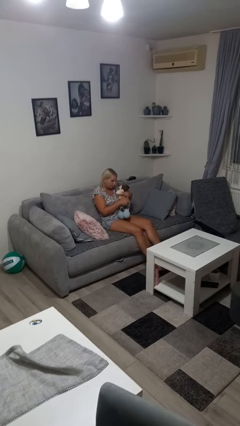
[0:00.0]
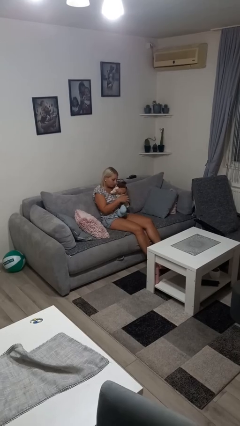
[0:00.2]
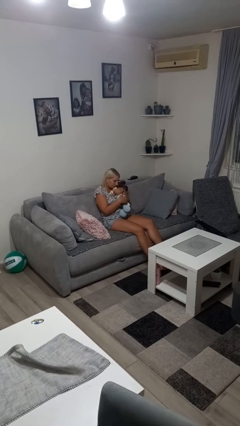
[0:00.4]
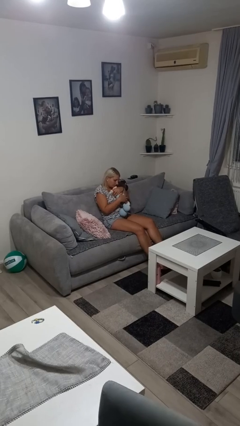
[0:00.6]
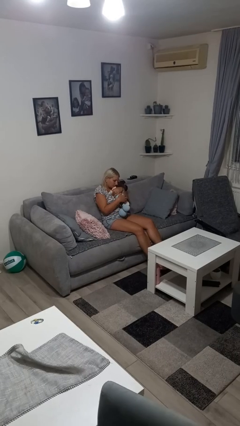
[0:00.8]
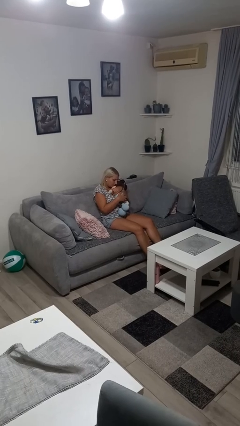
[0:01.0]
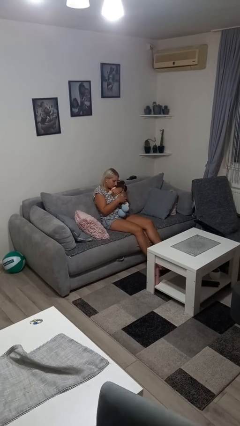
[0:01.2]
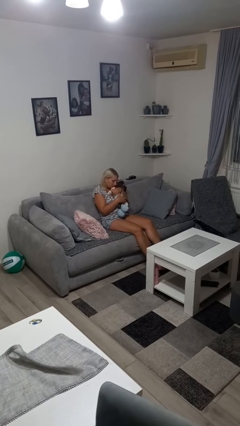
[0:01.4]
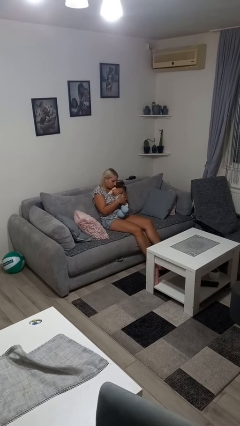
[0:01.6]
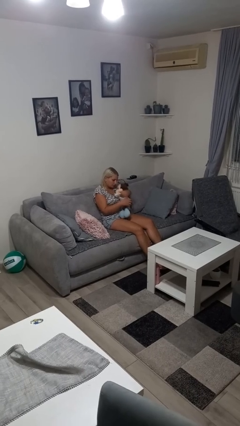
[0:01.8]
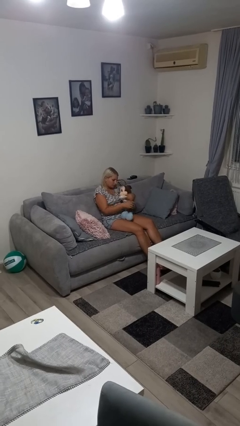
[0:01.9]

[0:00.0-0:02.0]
person hugs stuffed animal

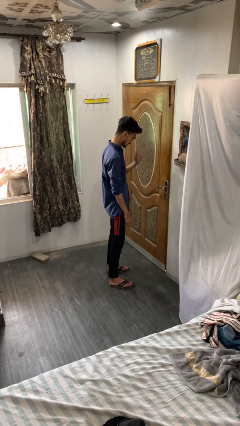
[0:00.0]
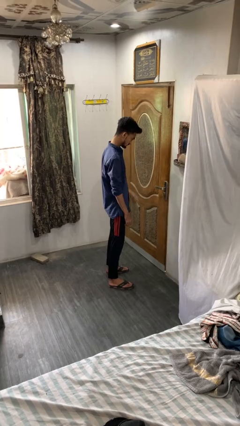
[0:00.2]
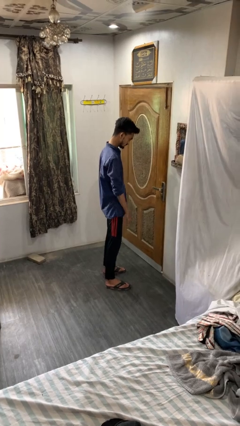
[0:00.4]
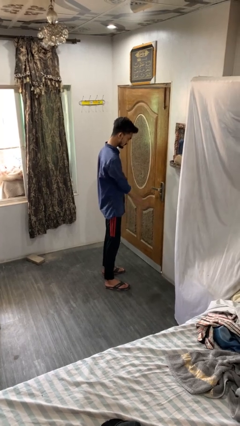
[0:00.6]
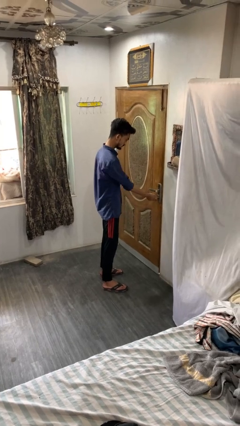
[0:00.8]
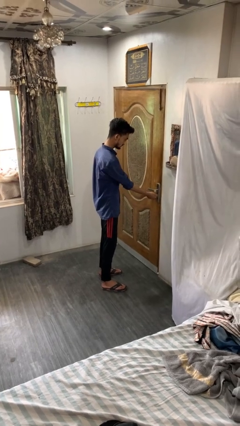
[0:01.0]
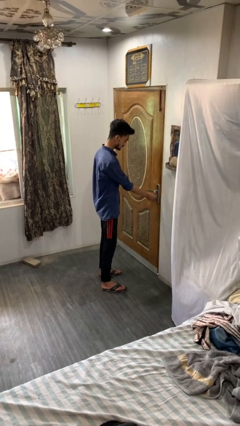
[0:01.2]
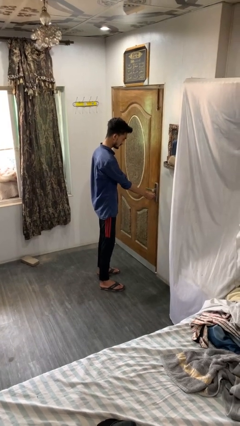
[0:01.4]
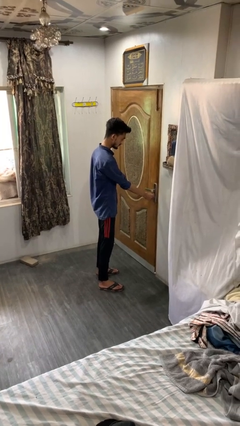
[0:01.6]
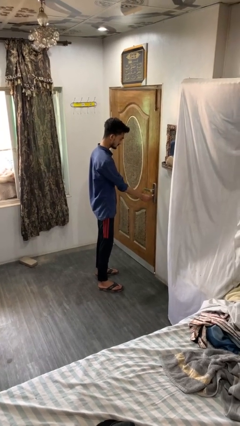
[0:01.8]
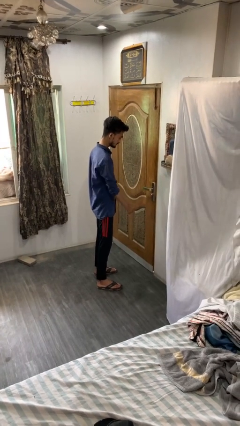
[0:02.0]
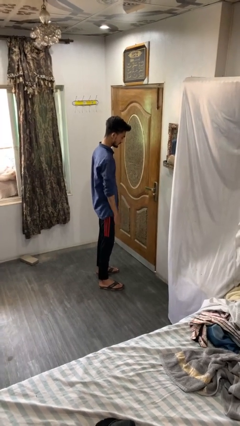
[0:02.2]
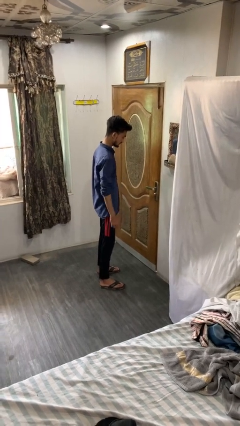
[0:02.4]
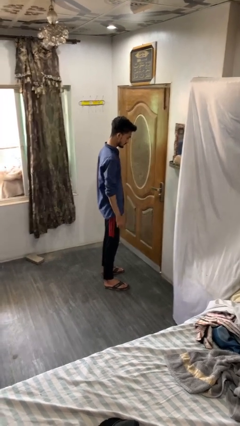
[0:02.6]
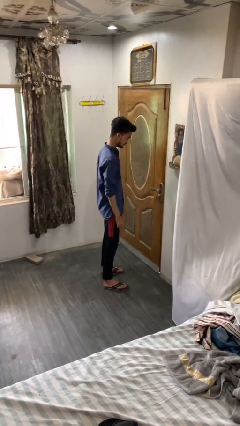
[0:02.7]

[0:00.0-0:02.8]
person unlocks door with keys

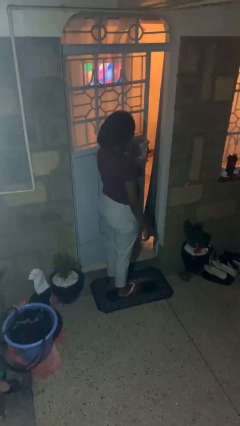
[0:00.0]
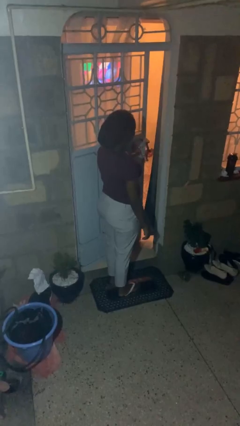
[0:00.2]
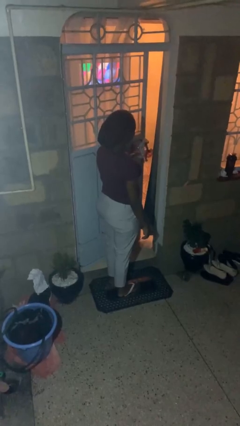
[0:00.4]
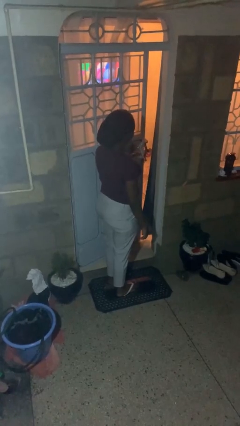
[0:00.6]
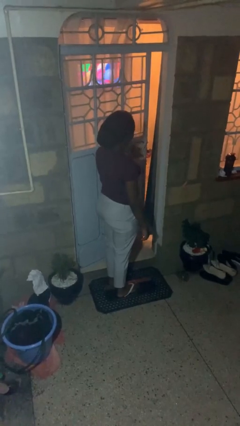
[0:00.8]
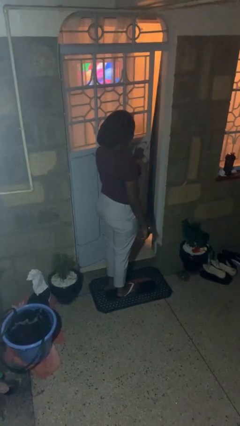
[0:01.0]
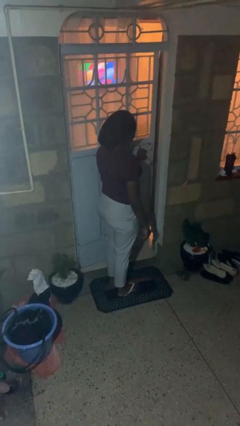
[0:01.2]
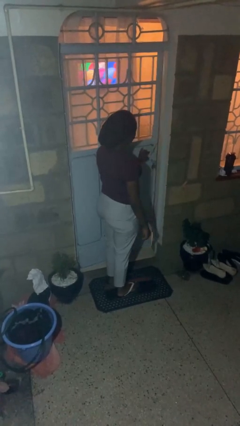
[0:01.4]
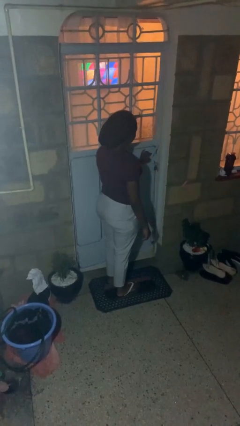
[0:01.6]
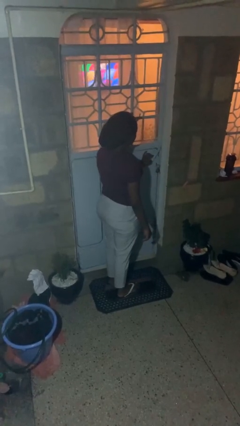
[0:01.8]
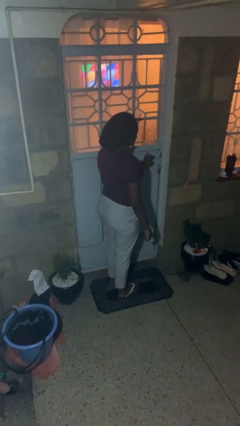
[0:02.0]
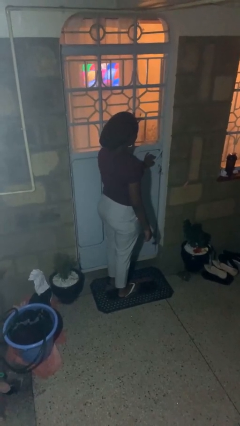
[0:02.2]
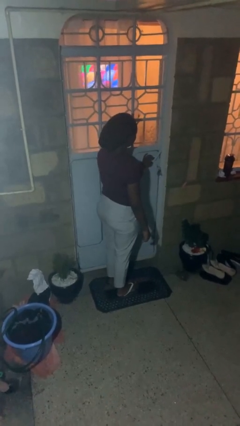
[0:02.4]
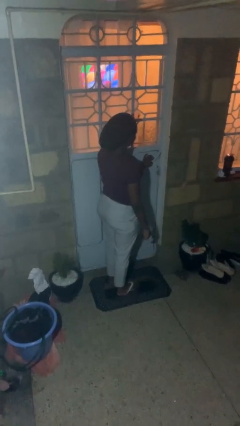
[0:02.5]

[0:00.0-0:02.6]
person closes facility door

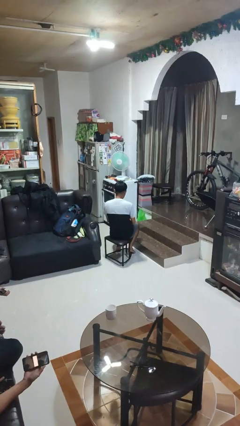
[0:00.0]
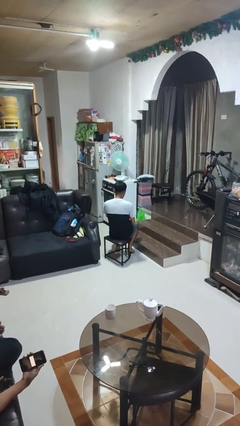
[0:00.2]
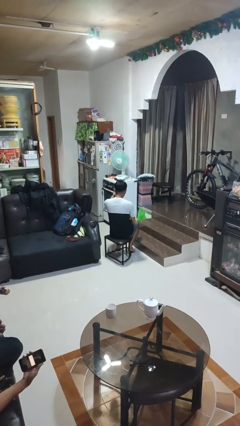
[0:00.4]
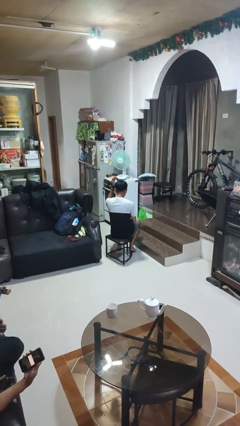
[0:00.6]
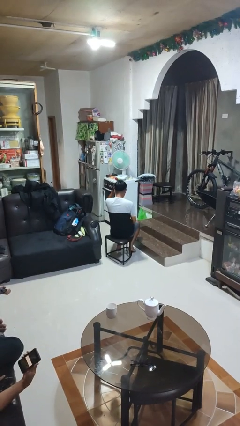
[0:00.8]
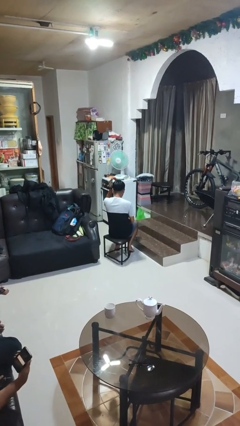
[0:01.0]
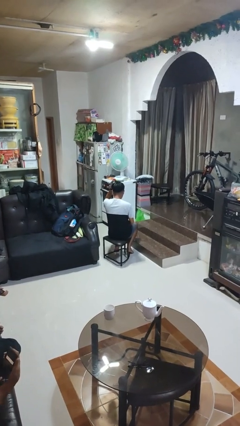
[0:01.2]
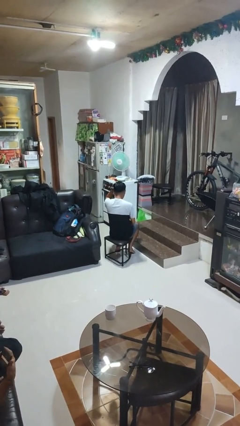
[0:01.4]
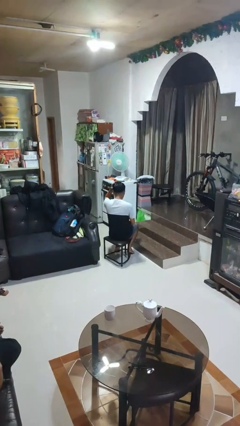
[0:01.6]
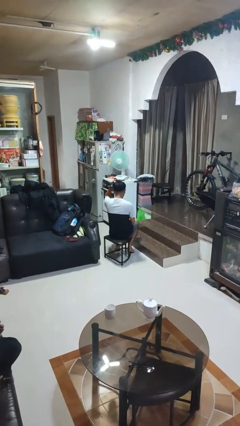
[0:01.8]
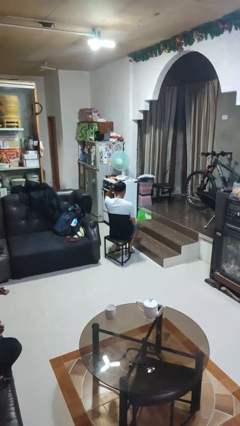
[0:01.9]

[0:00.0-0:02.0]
person pats head

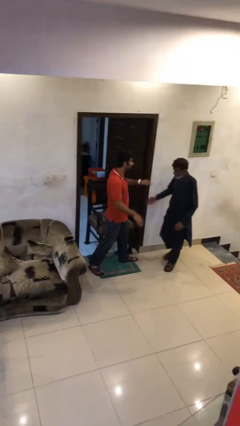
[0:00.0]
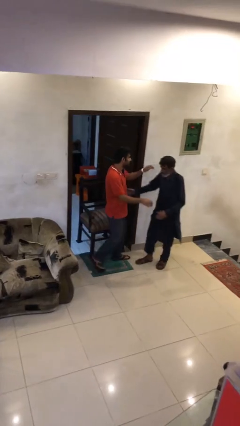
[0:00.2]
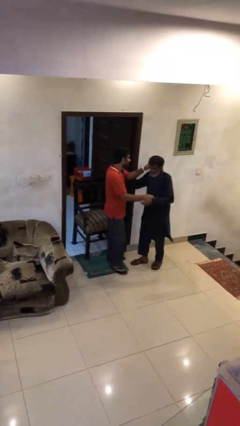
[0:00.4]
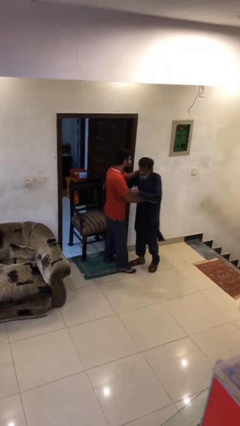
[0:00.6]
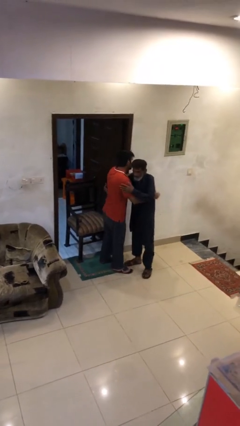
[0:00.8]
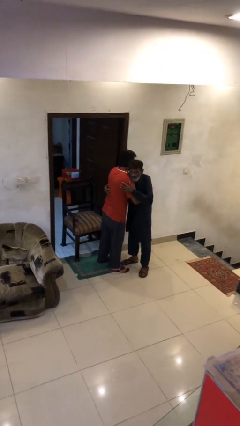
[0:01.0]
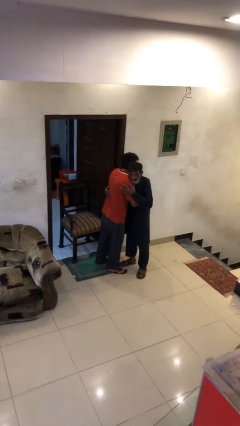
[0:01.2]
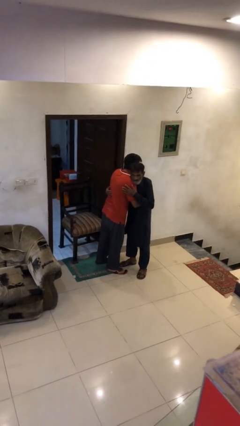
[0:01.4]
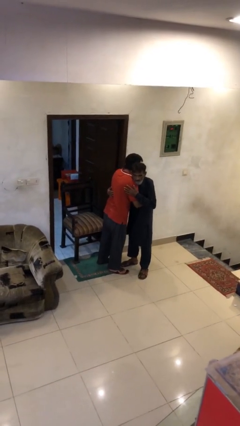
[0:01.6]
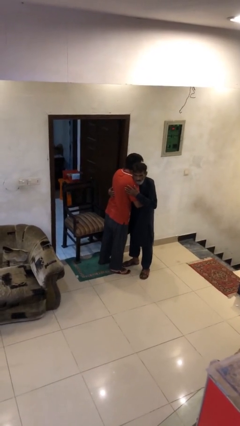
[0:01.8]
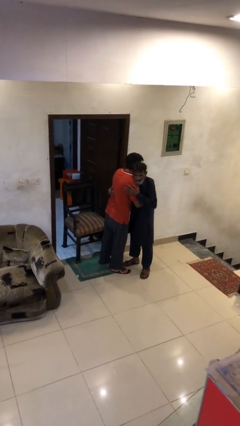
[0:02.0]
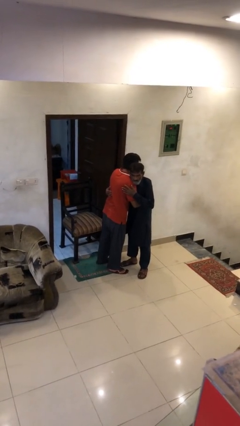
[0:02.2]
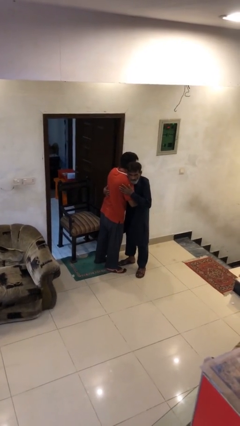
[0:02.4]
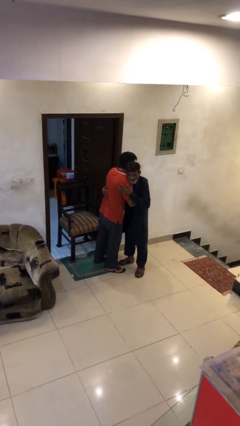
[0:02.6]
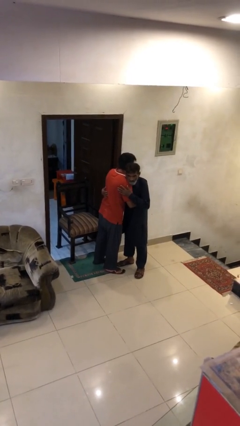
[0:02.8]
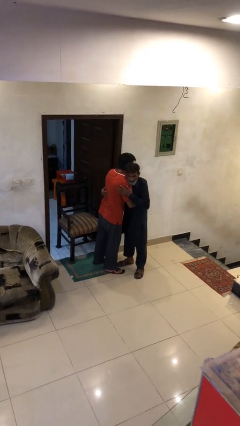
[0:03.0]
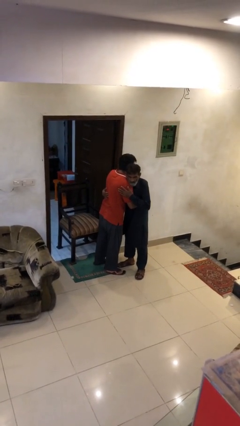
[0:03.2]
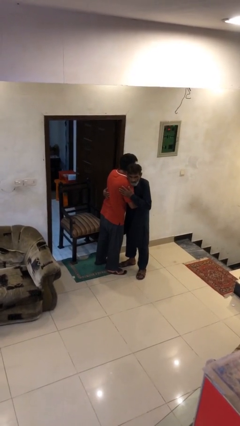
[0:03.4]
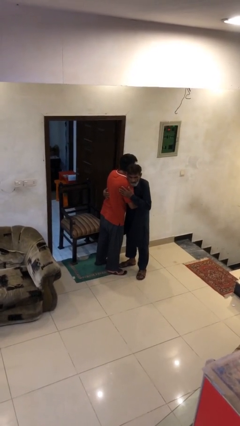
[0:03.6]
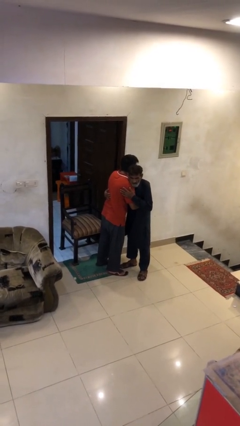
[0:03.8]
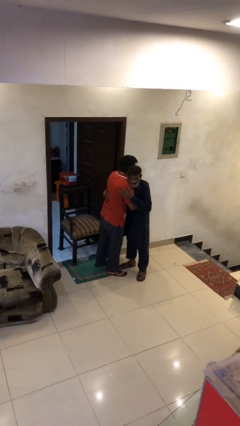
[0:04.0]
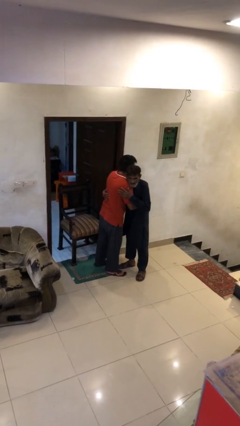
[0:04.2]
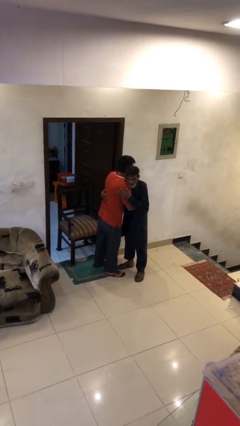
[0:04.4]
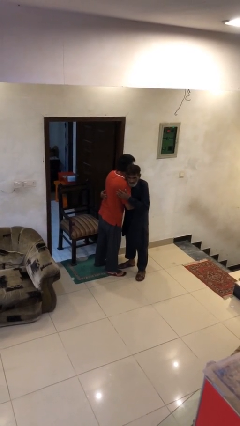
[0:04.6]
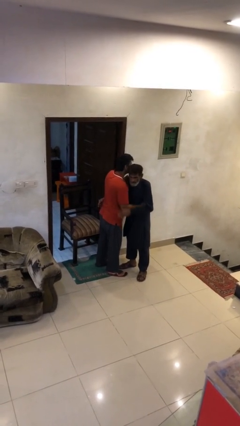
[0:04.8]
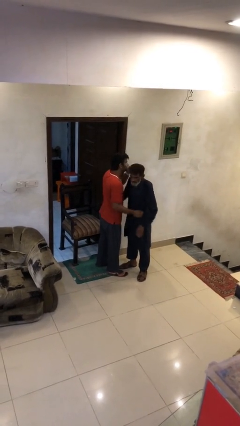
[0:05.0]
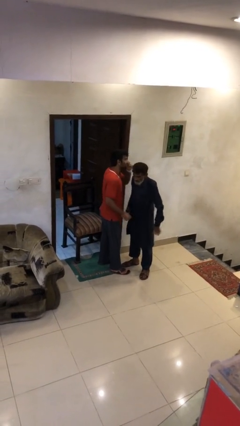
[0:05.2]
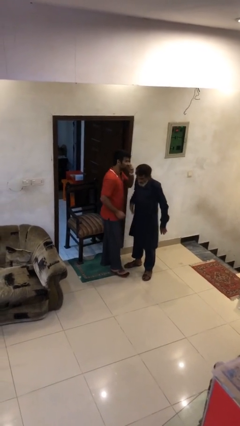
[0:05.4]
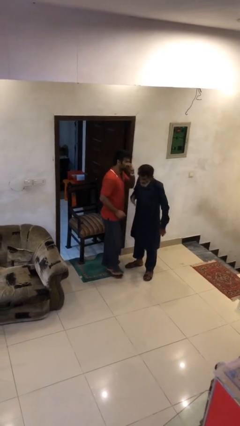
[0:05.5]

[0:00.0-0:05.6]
person embraces person

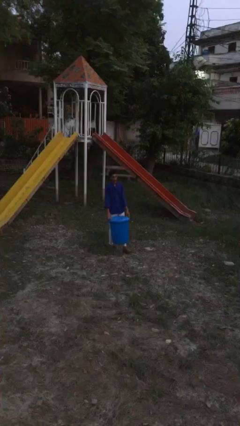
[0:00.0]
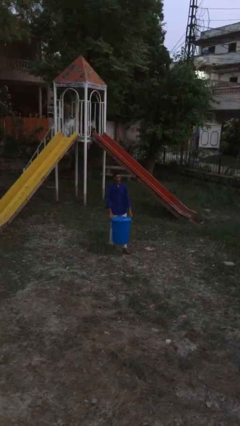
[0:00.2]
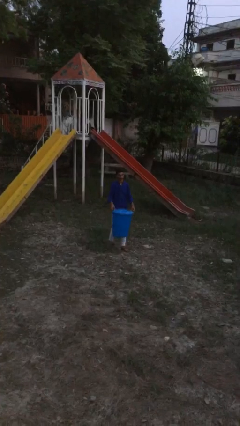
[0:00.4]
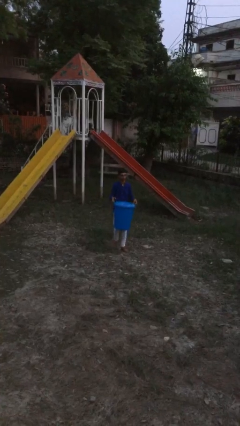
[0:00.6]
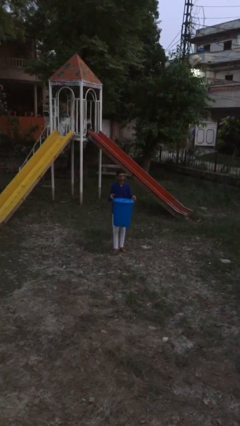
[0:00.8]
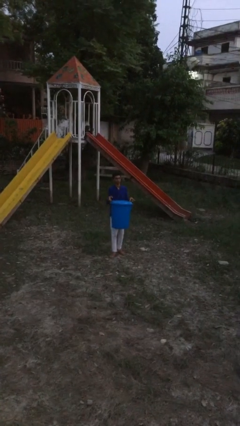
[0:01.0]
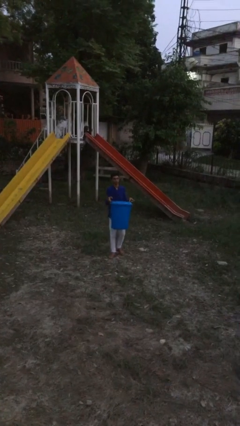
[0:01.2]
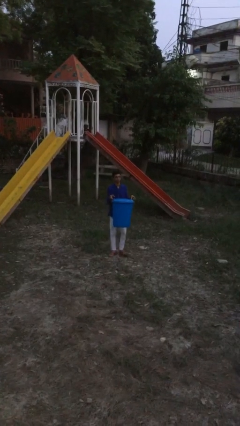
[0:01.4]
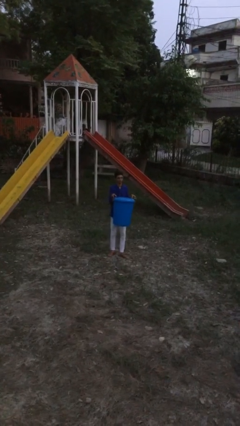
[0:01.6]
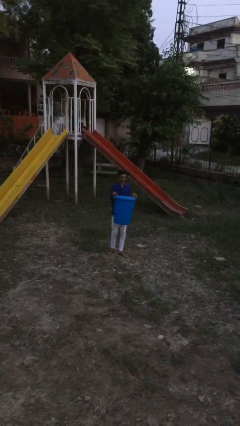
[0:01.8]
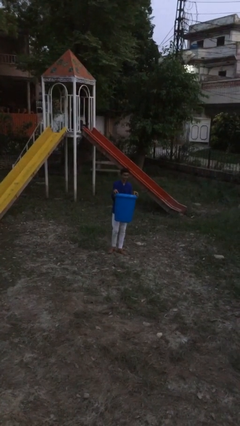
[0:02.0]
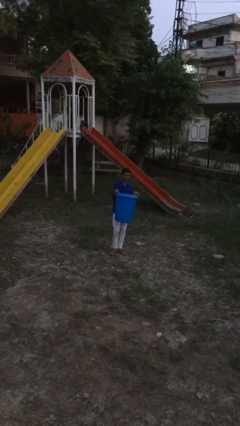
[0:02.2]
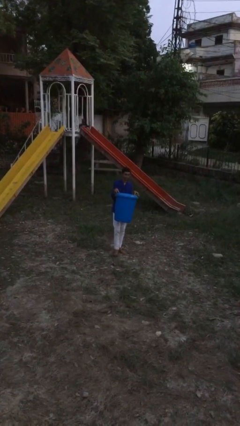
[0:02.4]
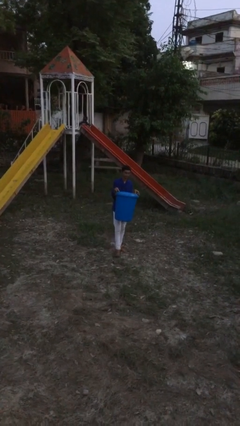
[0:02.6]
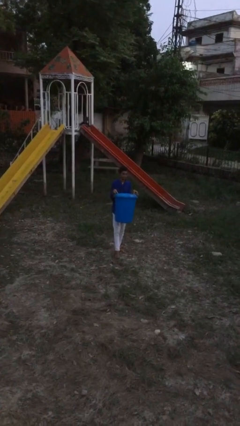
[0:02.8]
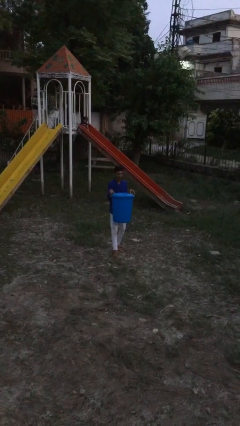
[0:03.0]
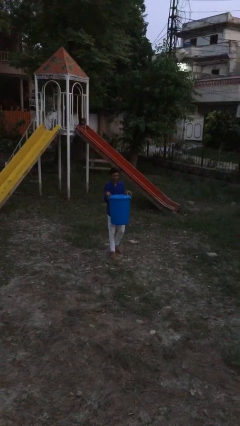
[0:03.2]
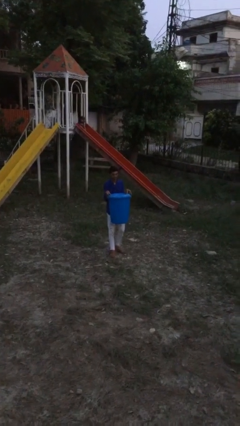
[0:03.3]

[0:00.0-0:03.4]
person carries heavy object
